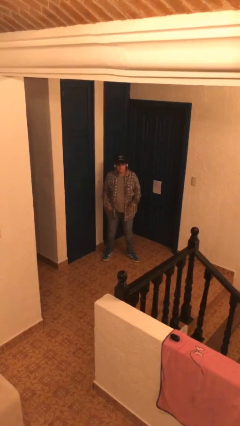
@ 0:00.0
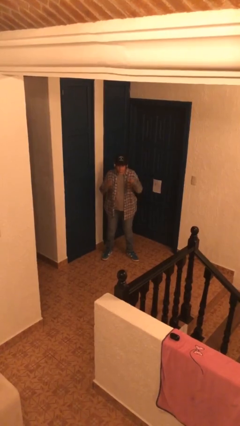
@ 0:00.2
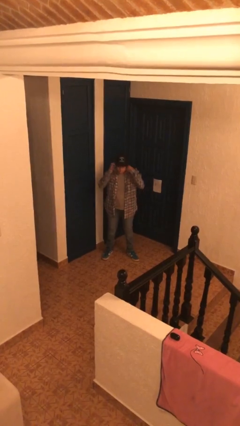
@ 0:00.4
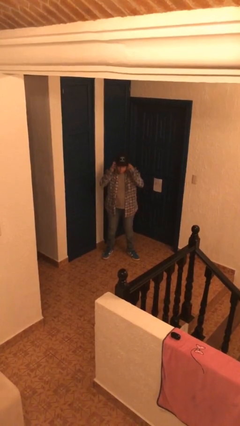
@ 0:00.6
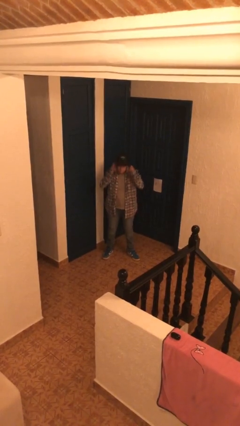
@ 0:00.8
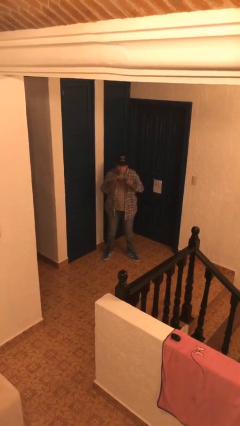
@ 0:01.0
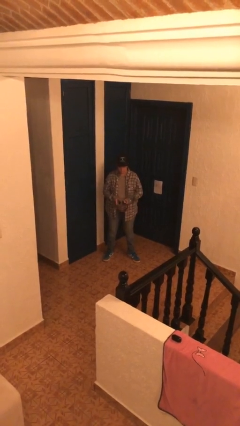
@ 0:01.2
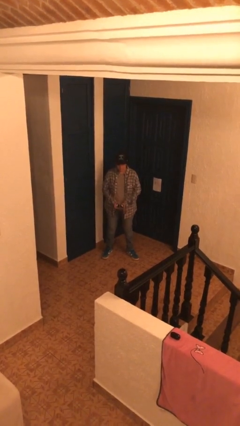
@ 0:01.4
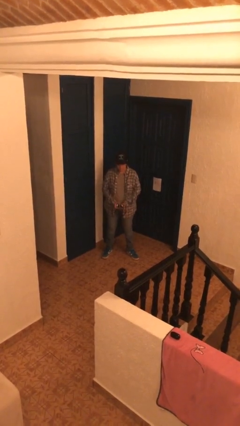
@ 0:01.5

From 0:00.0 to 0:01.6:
person takes off headphones

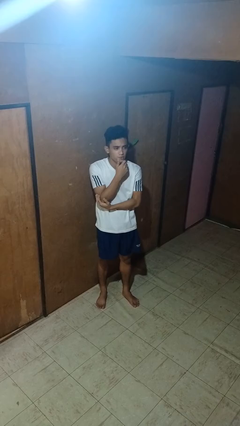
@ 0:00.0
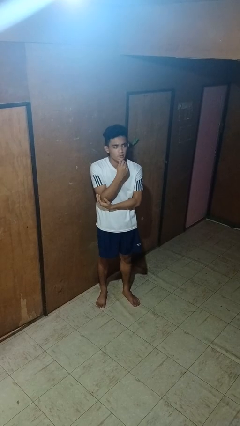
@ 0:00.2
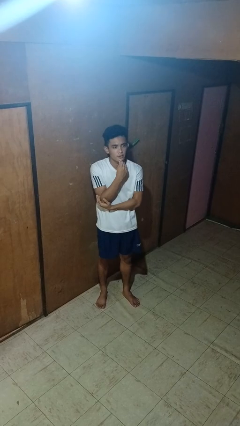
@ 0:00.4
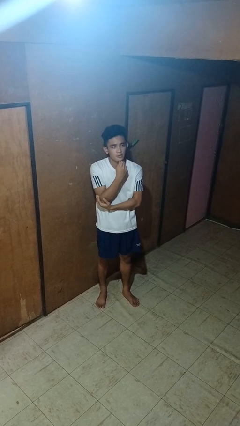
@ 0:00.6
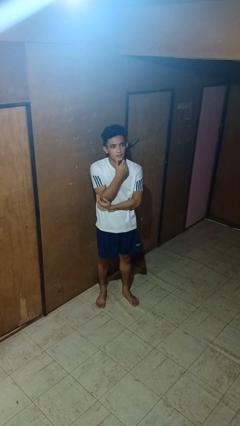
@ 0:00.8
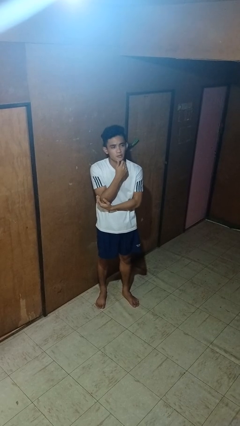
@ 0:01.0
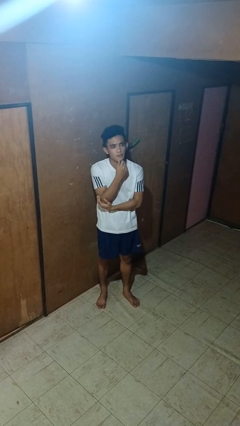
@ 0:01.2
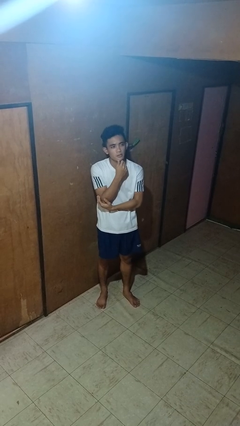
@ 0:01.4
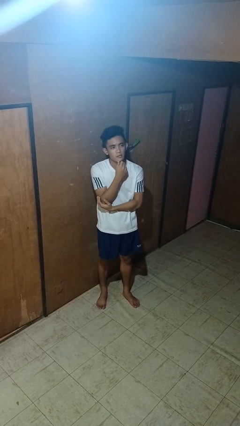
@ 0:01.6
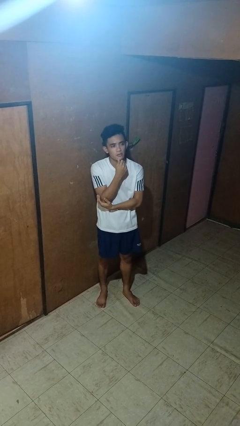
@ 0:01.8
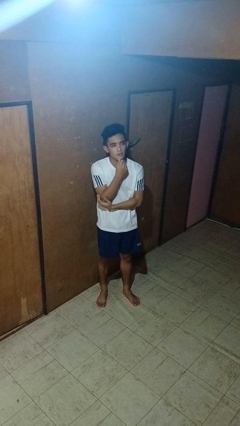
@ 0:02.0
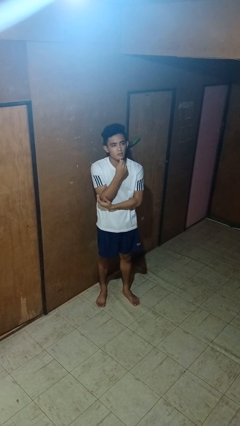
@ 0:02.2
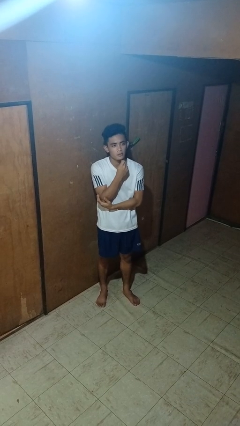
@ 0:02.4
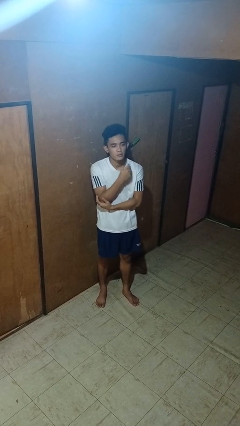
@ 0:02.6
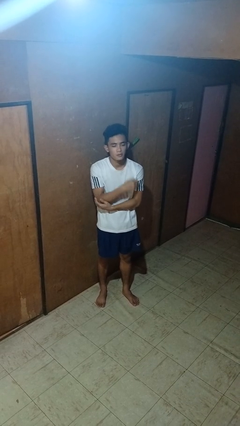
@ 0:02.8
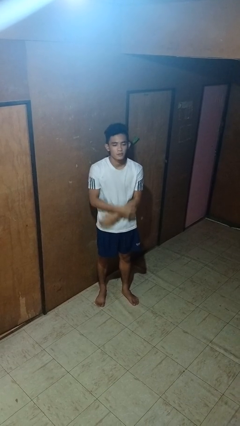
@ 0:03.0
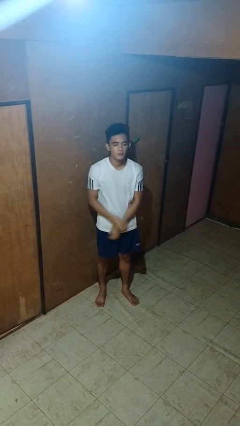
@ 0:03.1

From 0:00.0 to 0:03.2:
person strokes chin

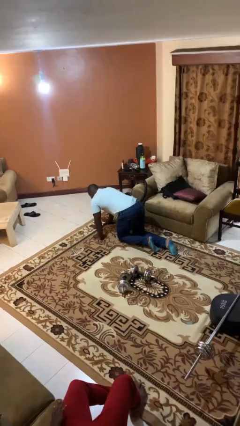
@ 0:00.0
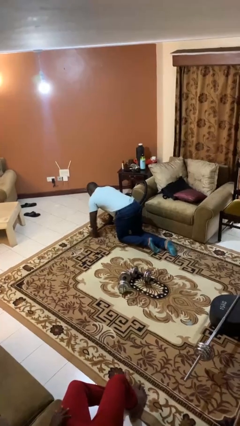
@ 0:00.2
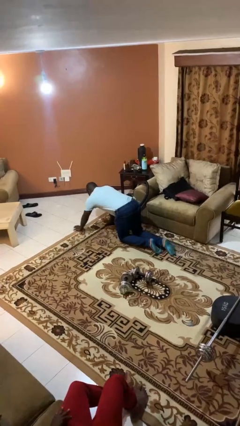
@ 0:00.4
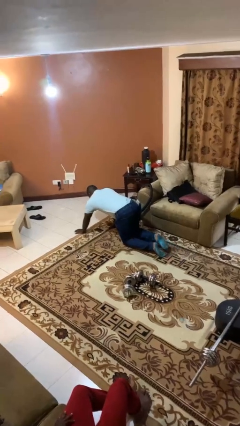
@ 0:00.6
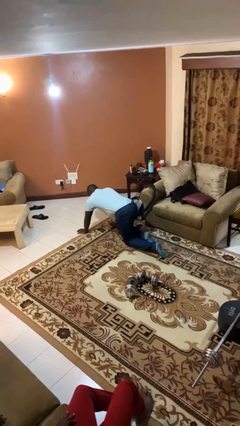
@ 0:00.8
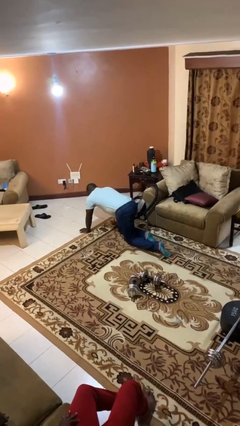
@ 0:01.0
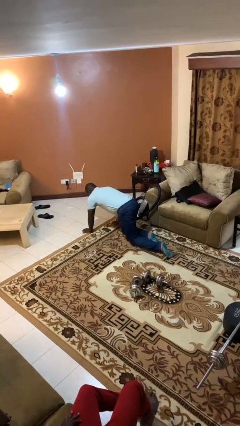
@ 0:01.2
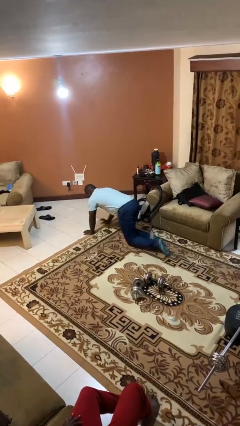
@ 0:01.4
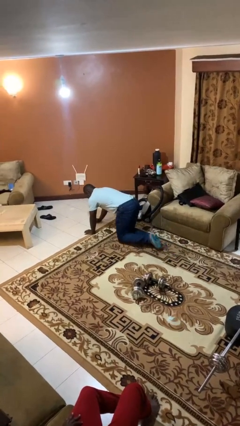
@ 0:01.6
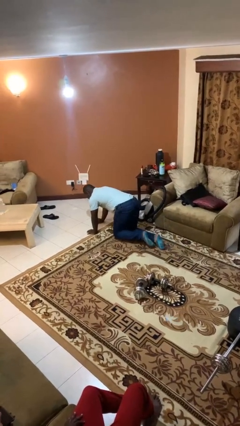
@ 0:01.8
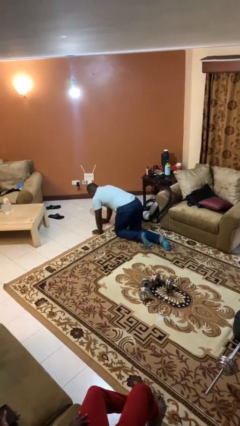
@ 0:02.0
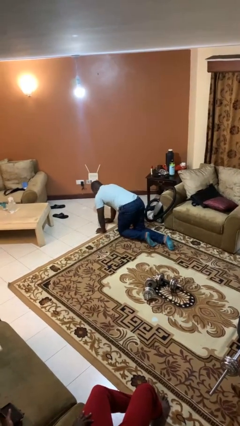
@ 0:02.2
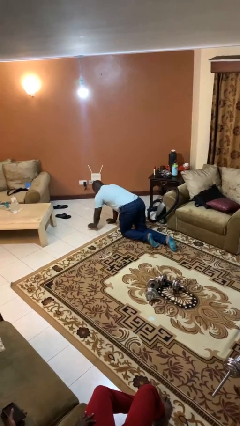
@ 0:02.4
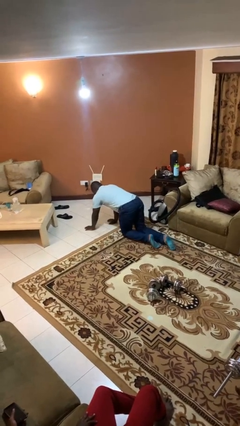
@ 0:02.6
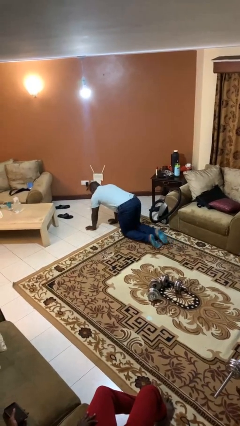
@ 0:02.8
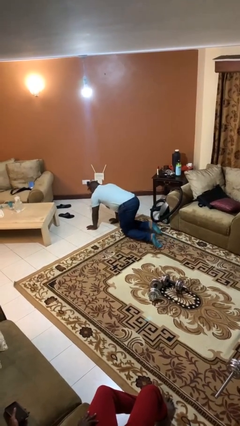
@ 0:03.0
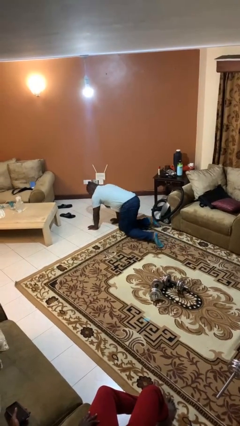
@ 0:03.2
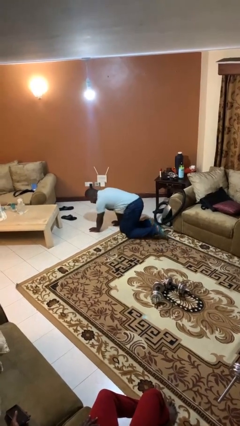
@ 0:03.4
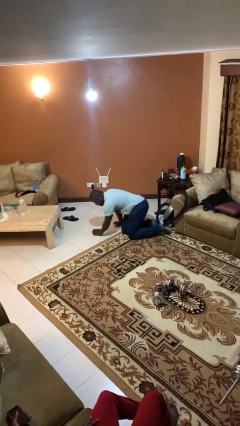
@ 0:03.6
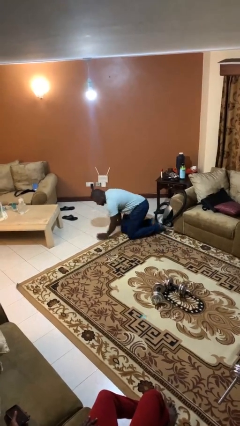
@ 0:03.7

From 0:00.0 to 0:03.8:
person crawls

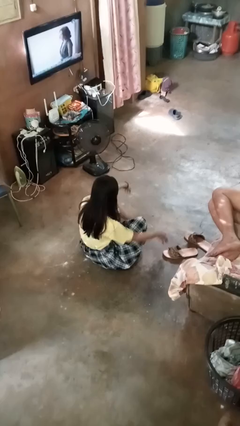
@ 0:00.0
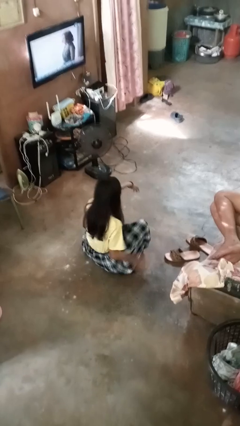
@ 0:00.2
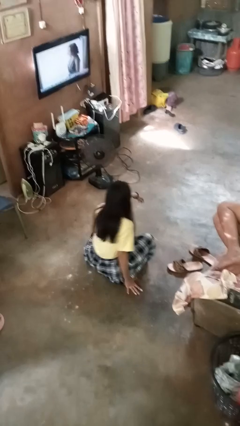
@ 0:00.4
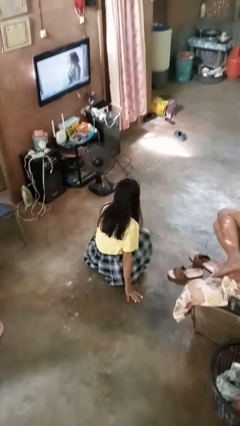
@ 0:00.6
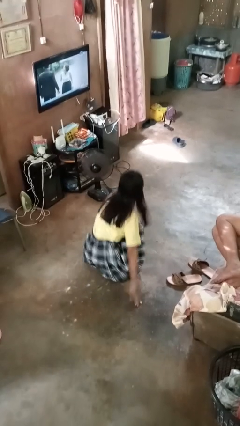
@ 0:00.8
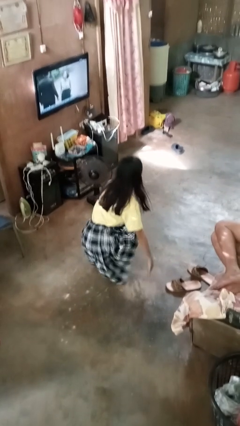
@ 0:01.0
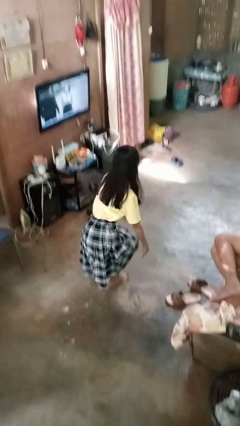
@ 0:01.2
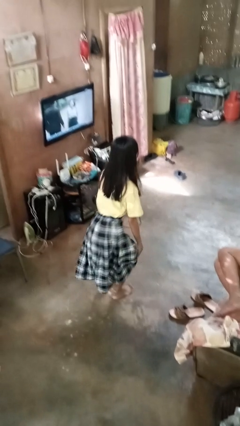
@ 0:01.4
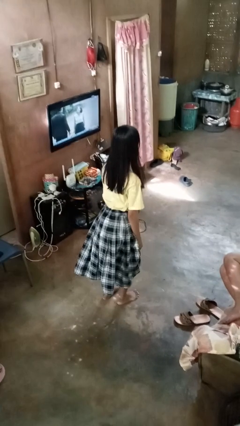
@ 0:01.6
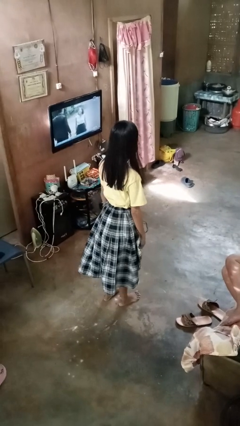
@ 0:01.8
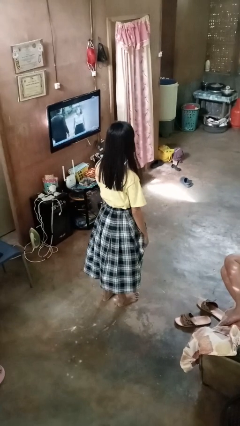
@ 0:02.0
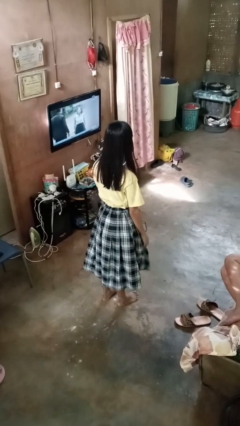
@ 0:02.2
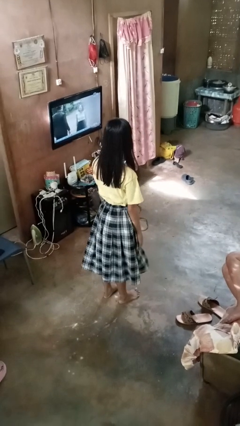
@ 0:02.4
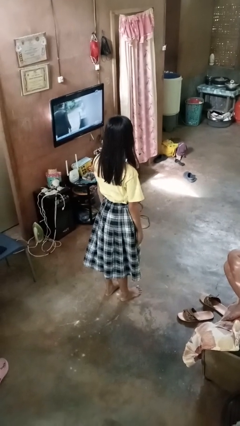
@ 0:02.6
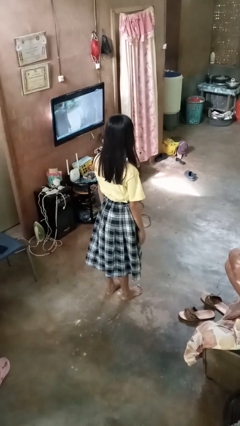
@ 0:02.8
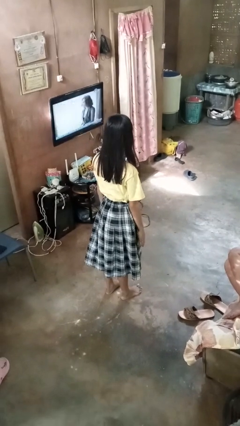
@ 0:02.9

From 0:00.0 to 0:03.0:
person stands up from floor

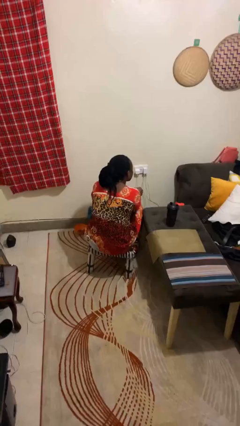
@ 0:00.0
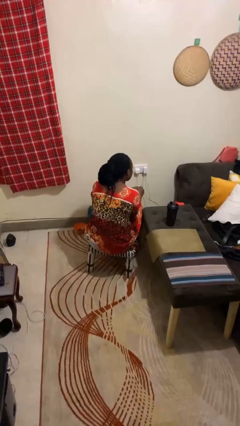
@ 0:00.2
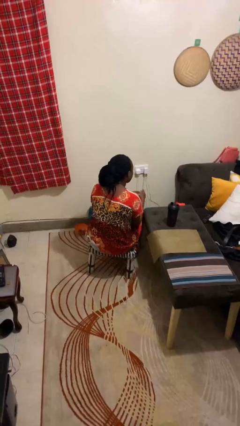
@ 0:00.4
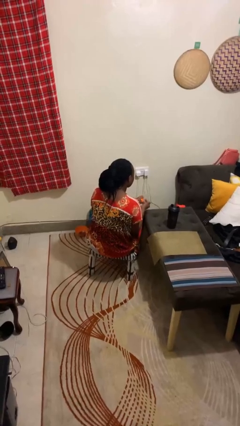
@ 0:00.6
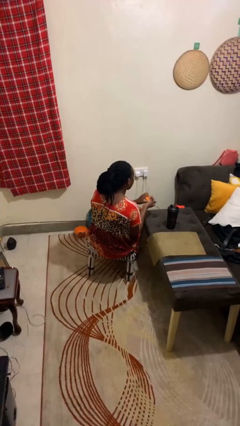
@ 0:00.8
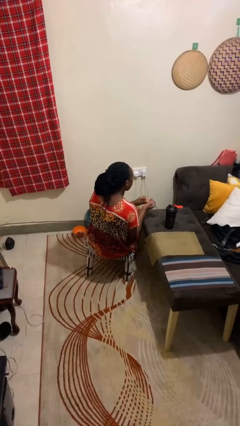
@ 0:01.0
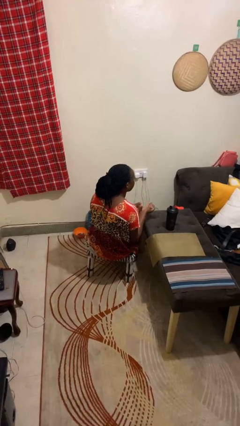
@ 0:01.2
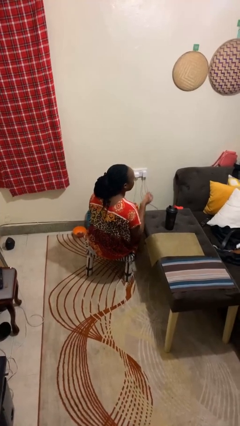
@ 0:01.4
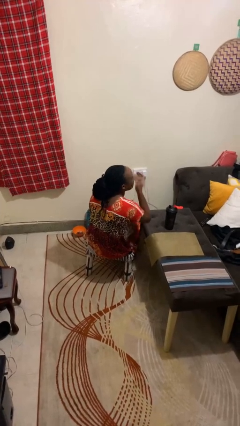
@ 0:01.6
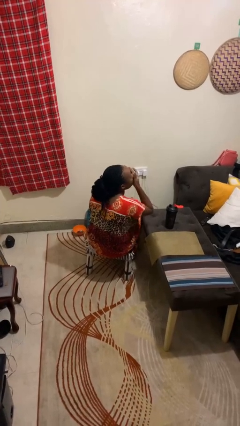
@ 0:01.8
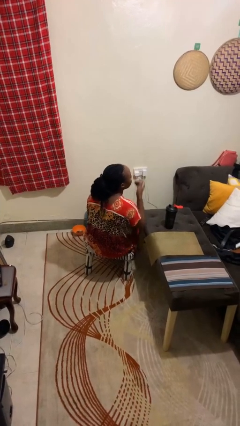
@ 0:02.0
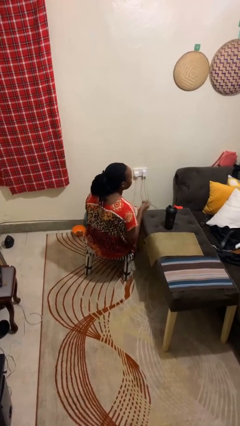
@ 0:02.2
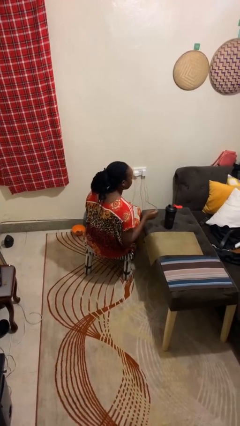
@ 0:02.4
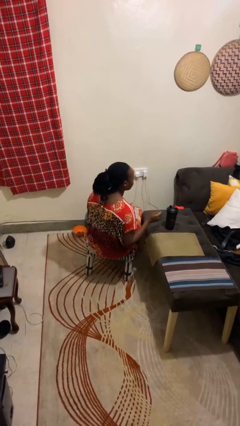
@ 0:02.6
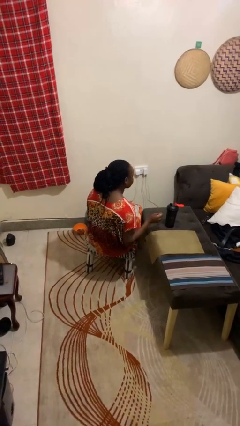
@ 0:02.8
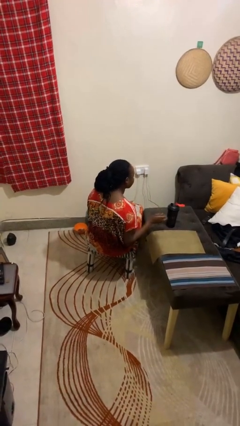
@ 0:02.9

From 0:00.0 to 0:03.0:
person takes medicine pills

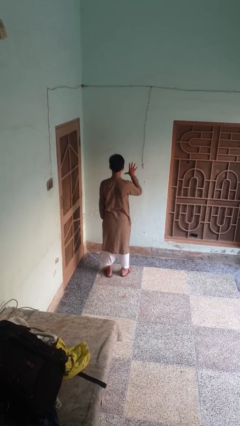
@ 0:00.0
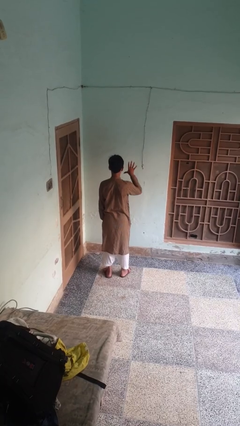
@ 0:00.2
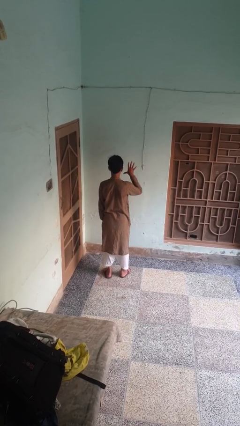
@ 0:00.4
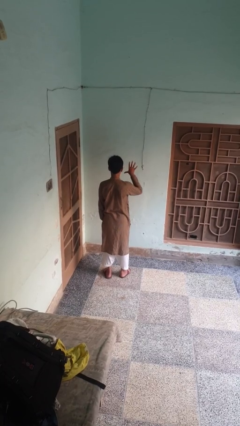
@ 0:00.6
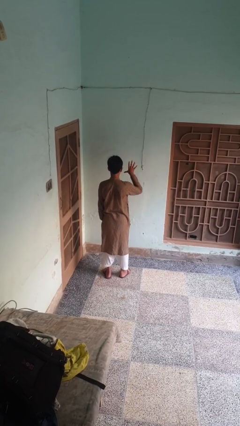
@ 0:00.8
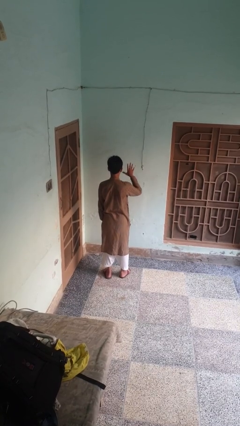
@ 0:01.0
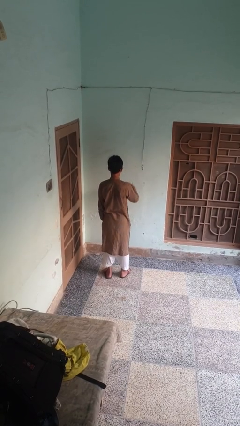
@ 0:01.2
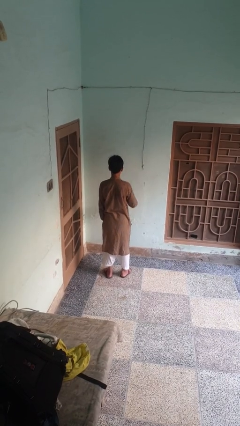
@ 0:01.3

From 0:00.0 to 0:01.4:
person gestures number five

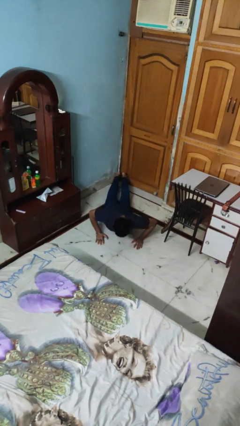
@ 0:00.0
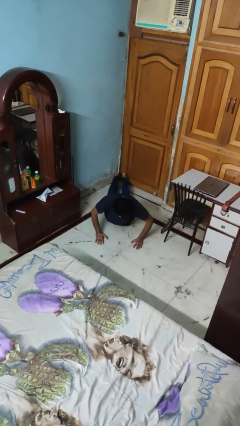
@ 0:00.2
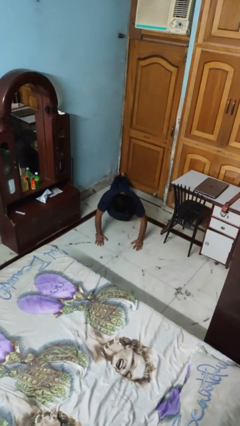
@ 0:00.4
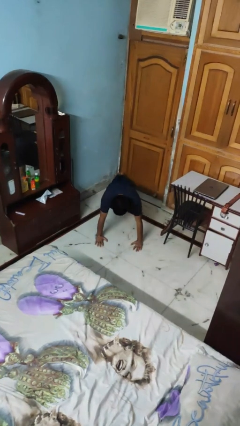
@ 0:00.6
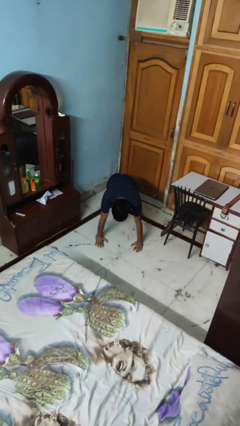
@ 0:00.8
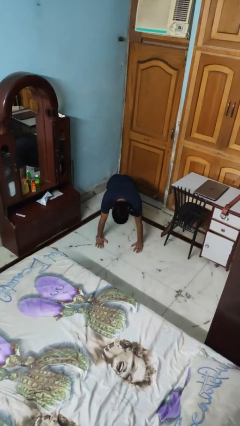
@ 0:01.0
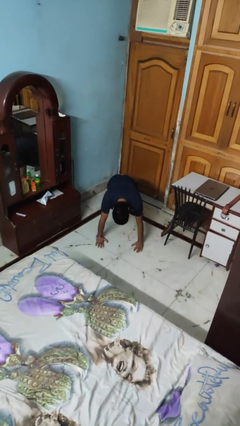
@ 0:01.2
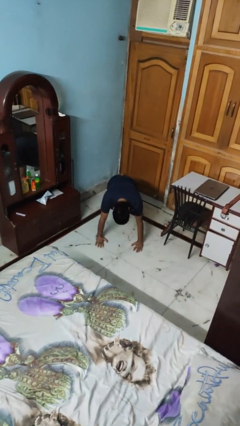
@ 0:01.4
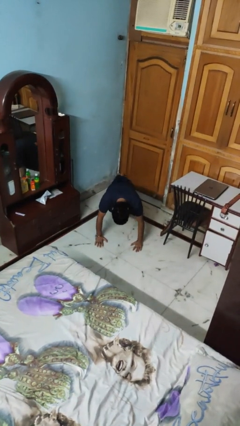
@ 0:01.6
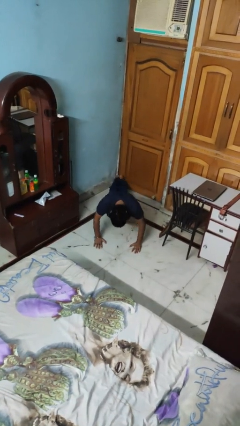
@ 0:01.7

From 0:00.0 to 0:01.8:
person exercises with pushup
